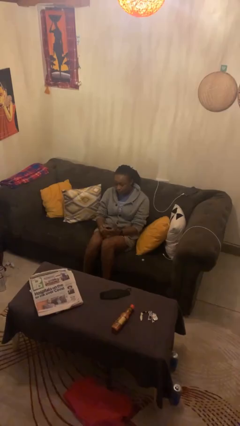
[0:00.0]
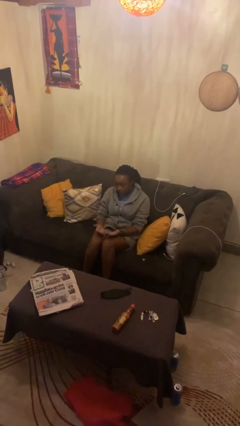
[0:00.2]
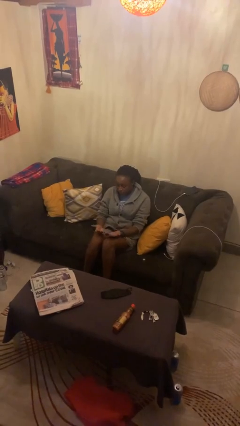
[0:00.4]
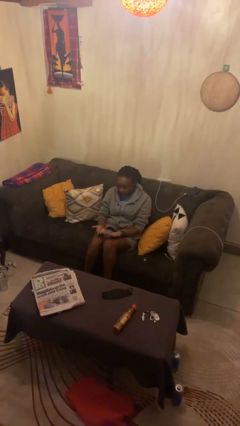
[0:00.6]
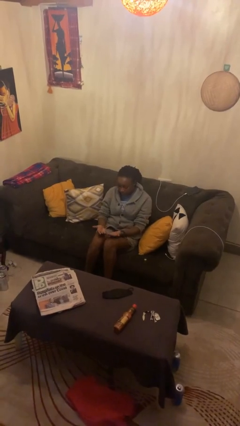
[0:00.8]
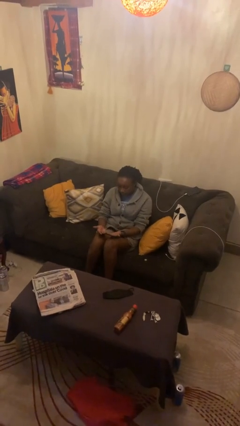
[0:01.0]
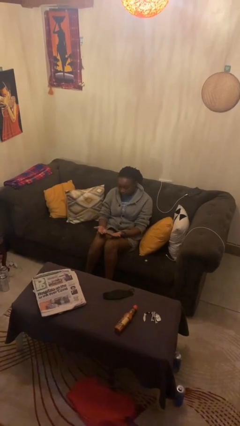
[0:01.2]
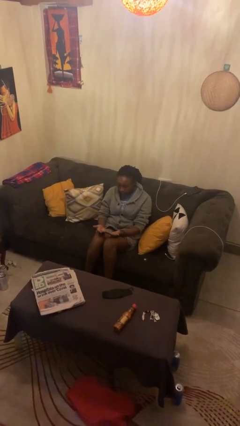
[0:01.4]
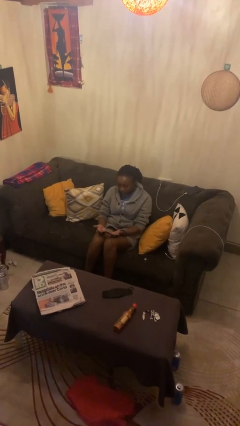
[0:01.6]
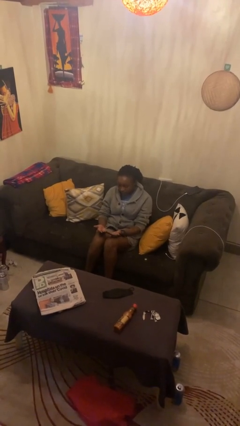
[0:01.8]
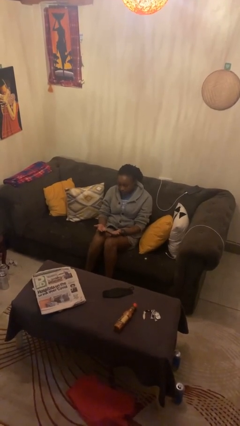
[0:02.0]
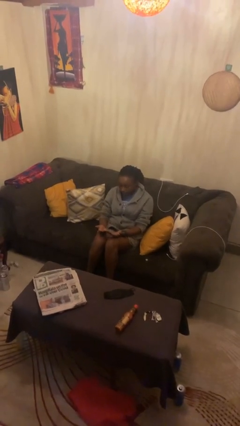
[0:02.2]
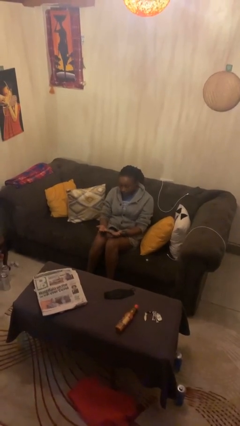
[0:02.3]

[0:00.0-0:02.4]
person looks at hands in lap

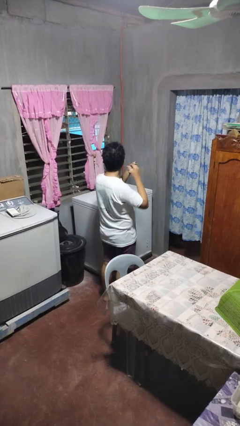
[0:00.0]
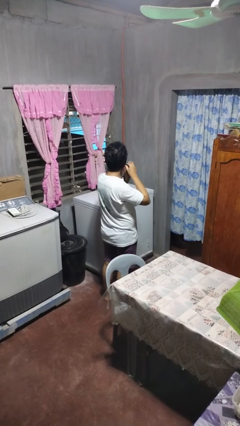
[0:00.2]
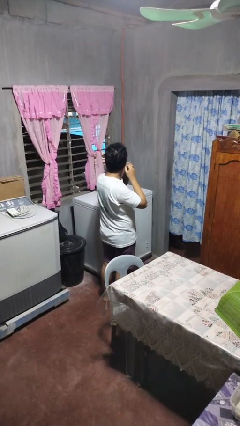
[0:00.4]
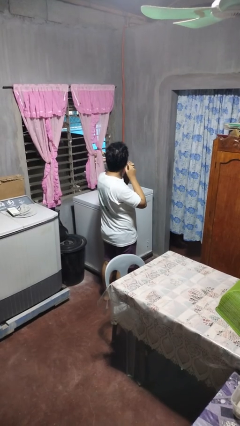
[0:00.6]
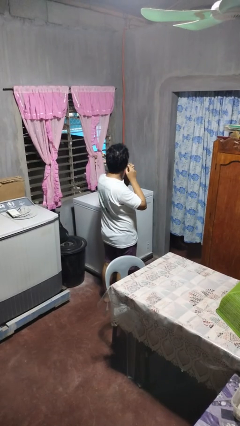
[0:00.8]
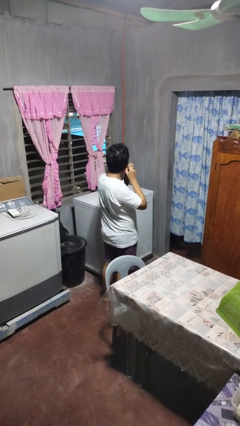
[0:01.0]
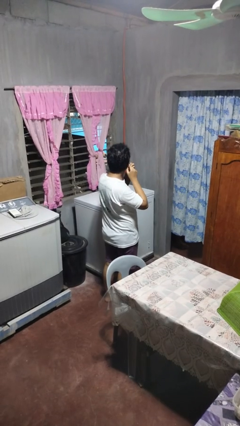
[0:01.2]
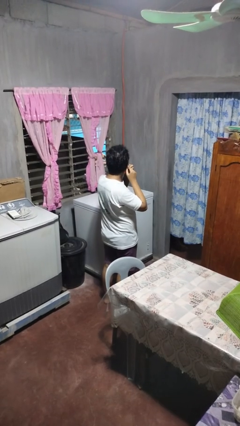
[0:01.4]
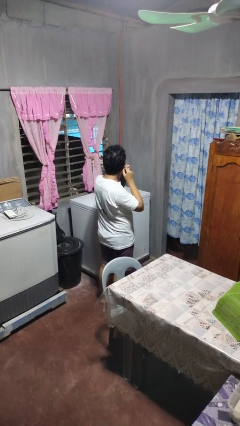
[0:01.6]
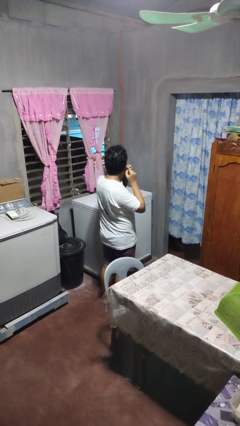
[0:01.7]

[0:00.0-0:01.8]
person puts on earrings

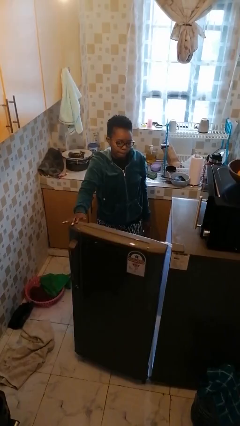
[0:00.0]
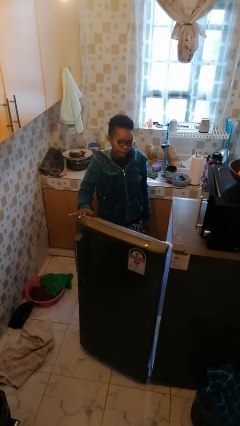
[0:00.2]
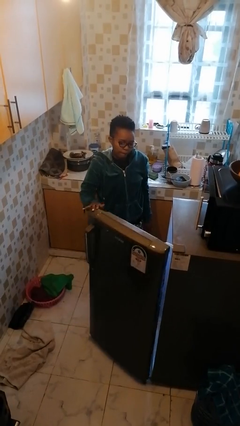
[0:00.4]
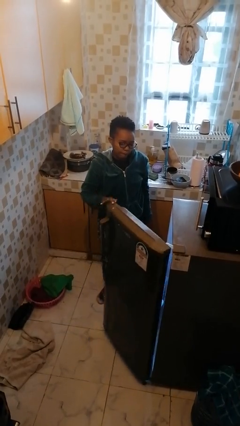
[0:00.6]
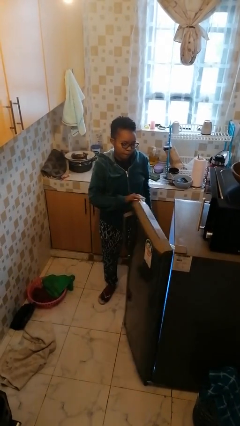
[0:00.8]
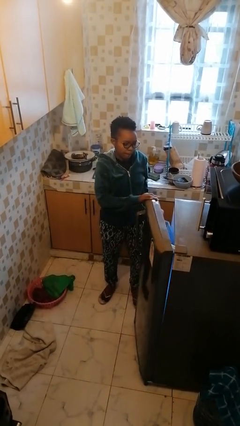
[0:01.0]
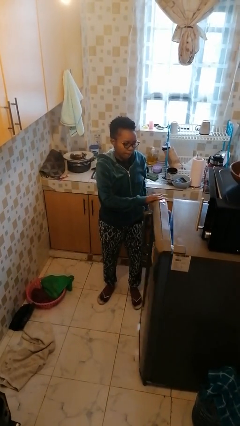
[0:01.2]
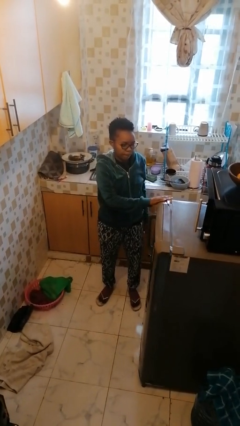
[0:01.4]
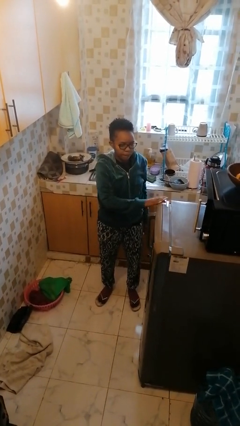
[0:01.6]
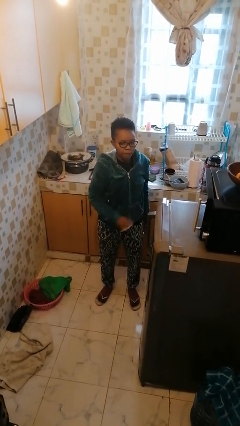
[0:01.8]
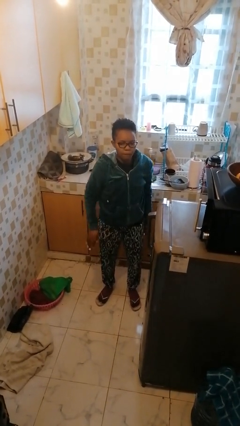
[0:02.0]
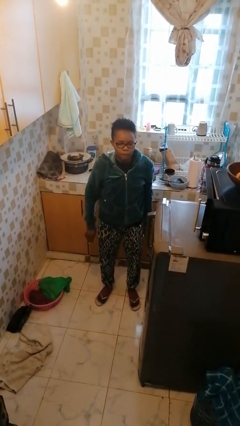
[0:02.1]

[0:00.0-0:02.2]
person closes refrigerator

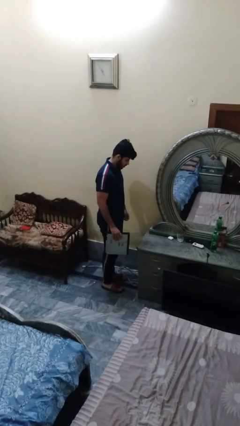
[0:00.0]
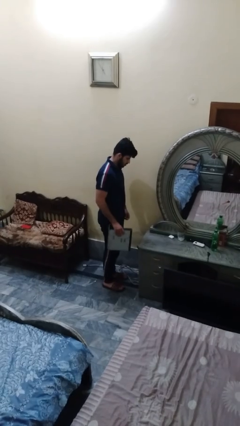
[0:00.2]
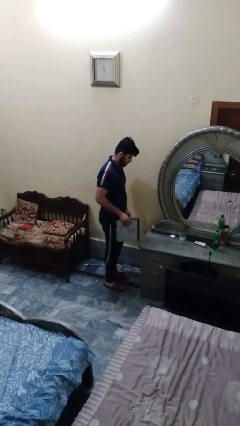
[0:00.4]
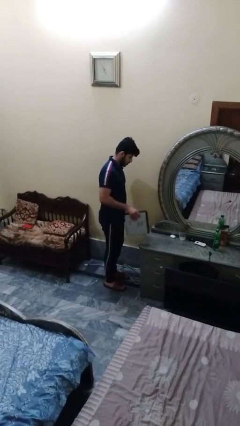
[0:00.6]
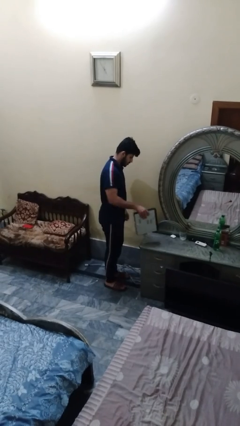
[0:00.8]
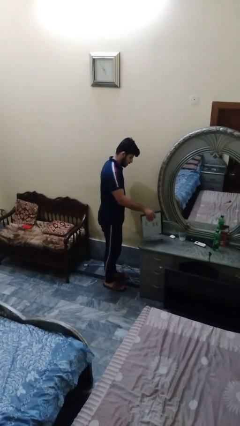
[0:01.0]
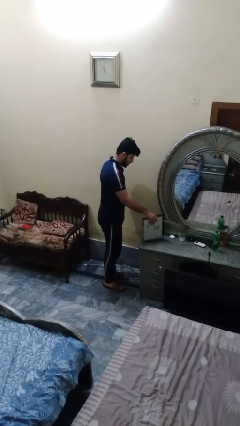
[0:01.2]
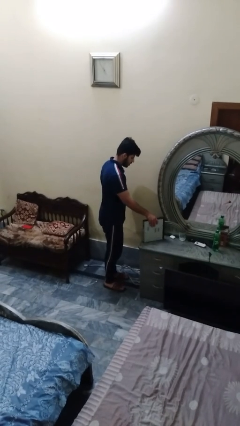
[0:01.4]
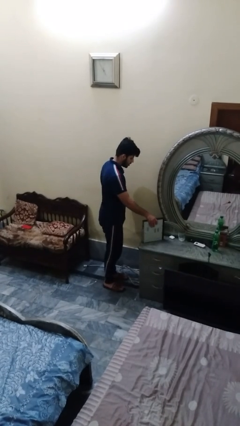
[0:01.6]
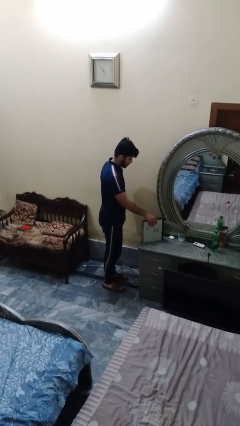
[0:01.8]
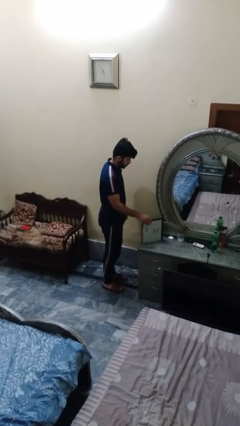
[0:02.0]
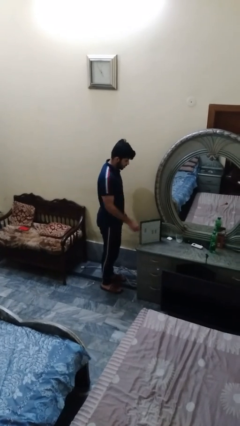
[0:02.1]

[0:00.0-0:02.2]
person puts down object on countertop

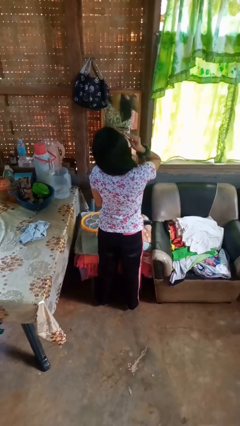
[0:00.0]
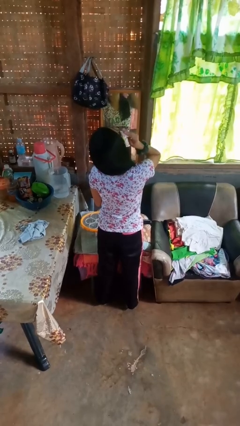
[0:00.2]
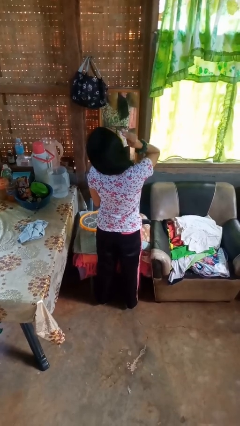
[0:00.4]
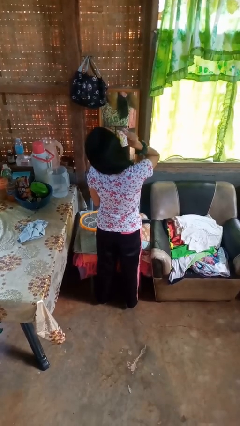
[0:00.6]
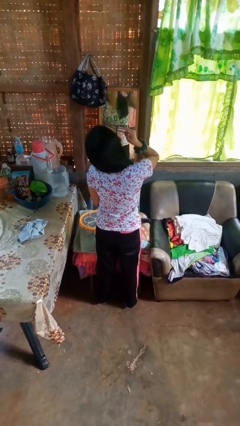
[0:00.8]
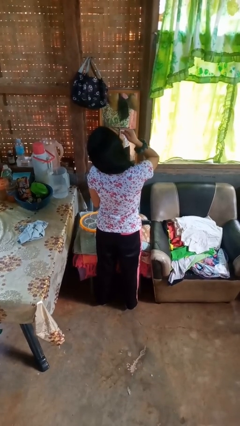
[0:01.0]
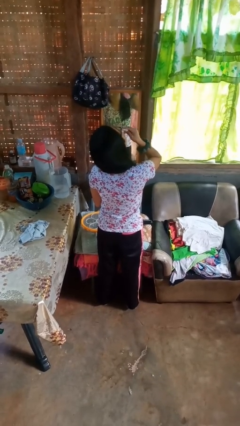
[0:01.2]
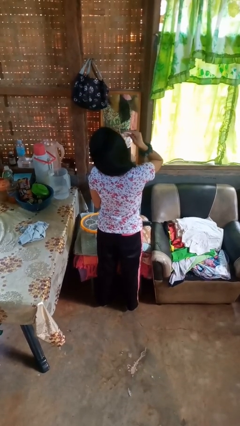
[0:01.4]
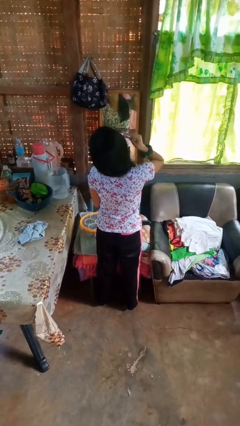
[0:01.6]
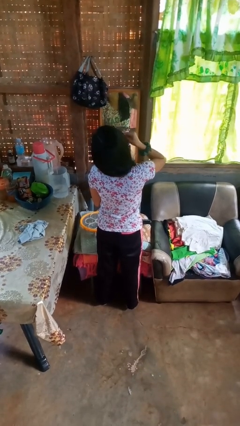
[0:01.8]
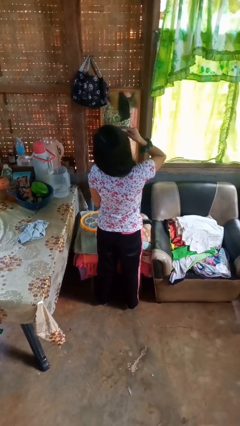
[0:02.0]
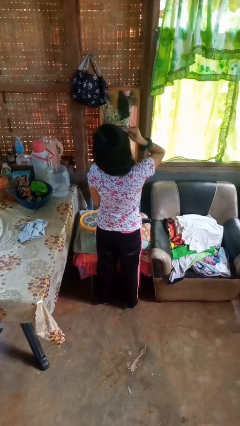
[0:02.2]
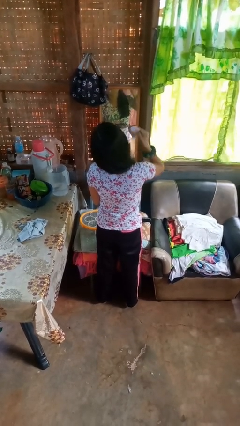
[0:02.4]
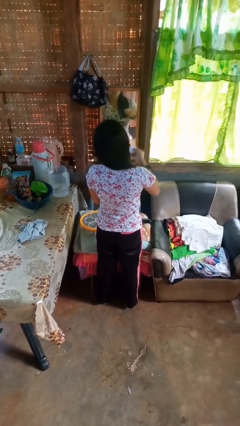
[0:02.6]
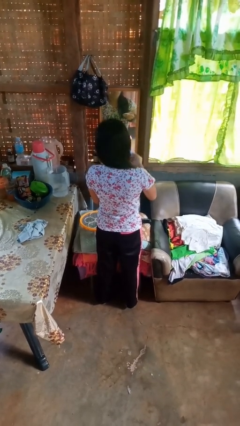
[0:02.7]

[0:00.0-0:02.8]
person applies foundation makeup

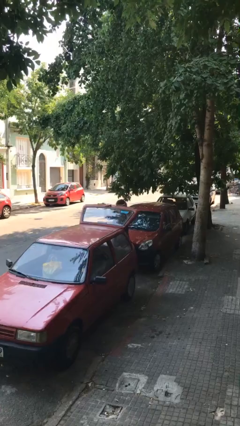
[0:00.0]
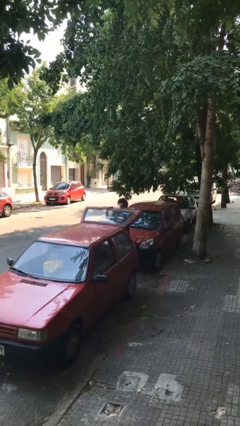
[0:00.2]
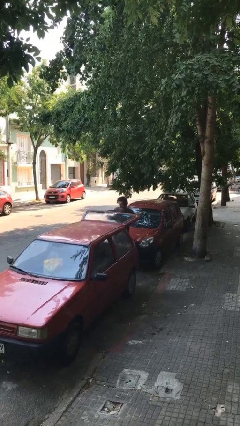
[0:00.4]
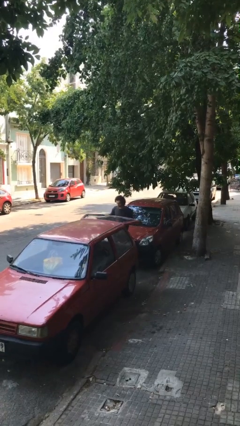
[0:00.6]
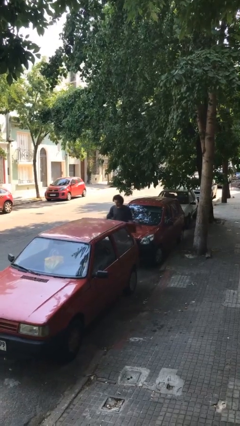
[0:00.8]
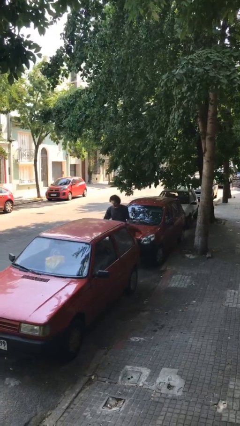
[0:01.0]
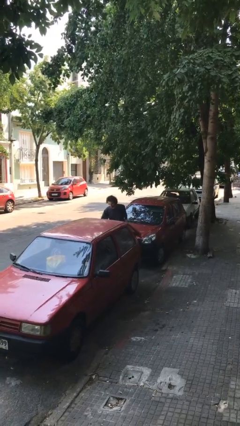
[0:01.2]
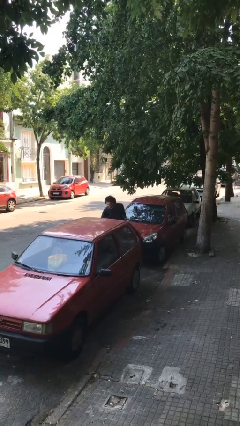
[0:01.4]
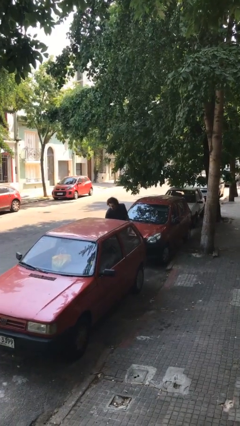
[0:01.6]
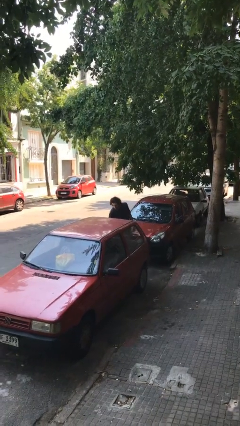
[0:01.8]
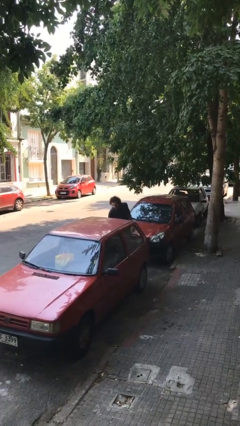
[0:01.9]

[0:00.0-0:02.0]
person closes car trunk

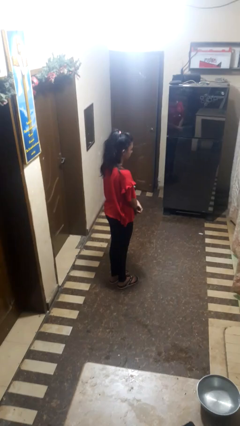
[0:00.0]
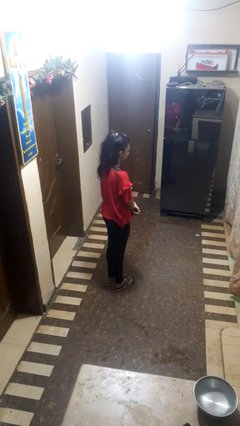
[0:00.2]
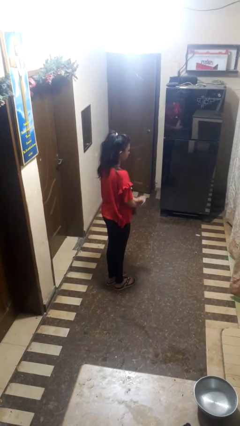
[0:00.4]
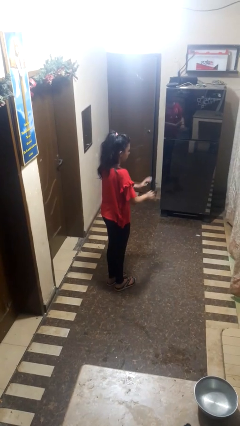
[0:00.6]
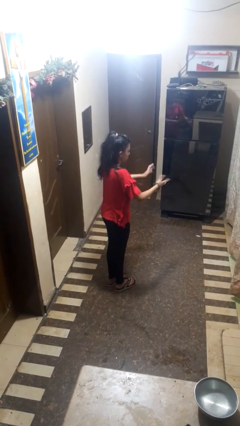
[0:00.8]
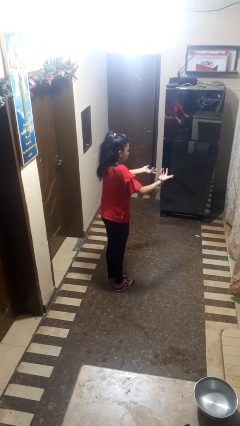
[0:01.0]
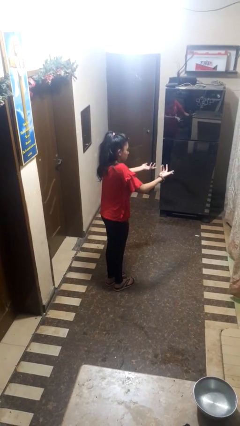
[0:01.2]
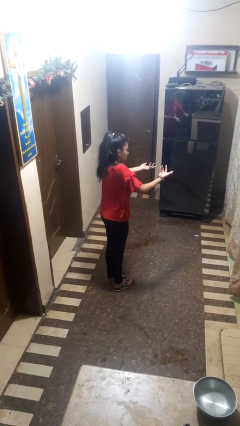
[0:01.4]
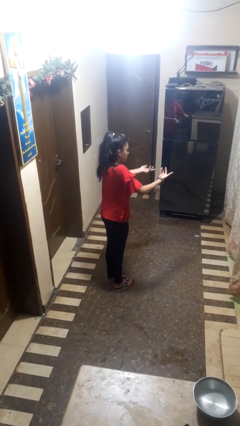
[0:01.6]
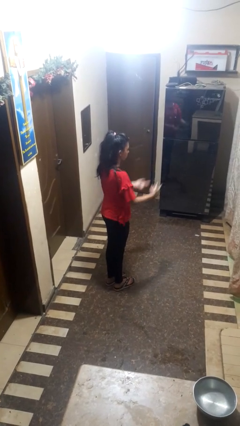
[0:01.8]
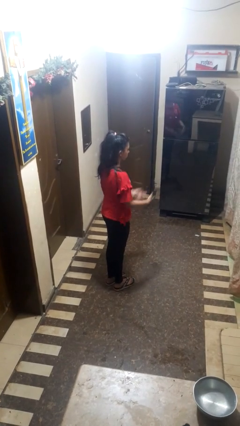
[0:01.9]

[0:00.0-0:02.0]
person shrugs

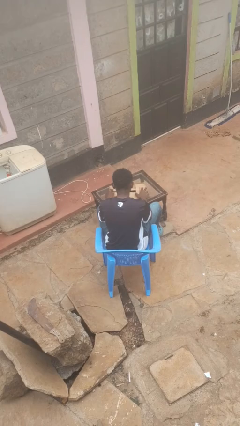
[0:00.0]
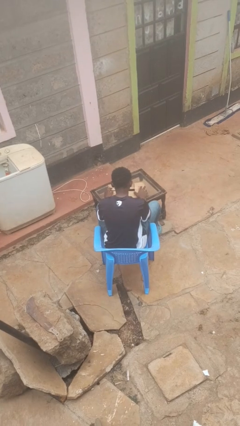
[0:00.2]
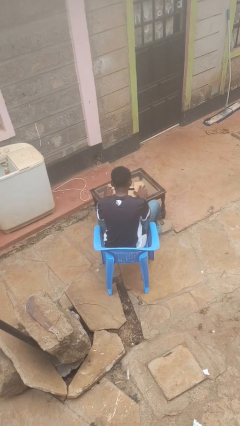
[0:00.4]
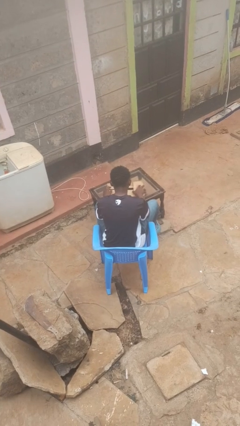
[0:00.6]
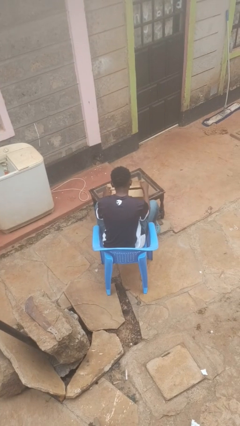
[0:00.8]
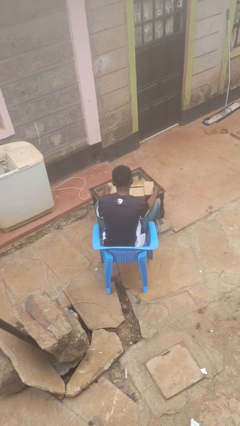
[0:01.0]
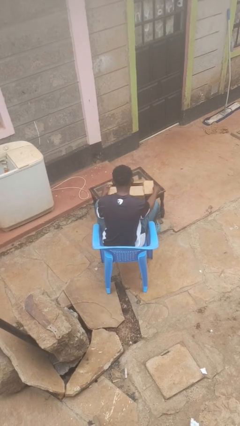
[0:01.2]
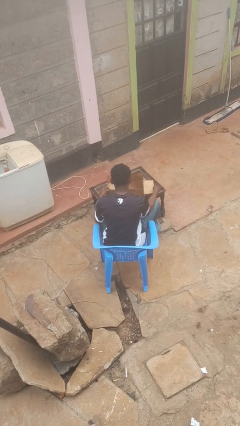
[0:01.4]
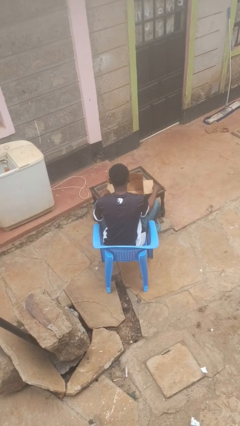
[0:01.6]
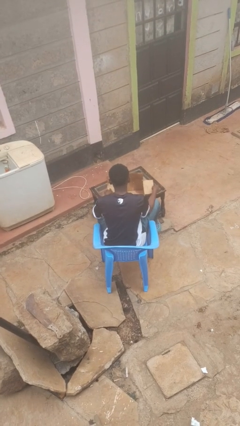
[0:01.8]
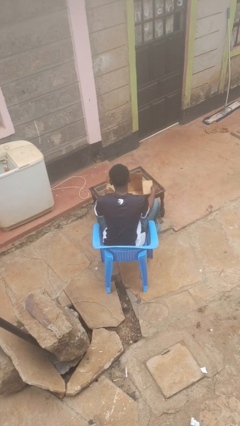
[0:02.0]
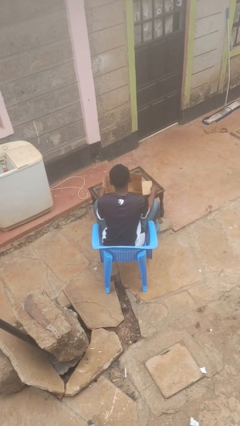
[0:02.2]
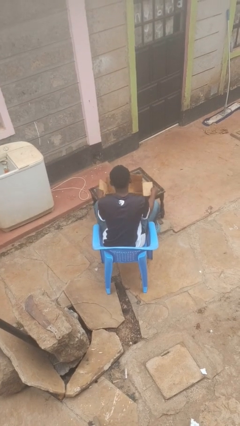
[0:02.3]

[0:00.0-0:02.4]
person opens box
